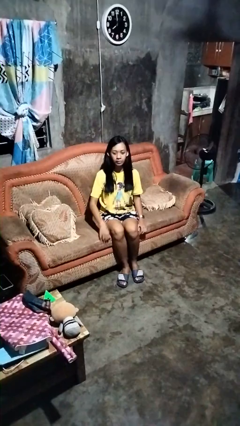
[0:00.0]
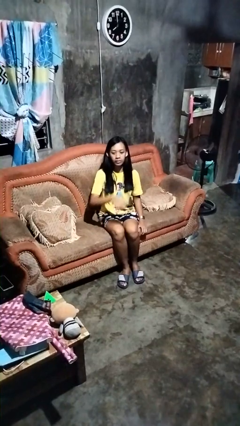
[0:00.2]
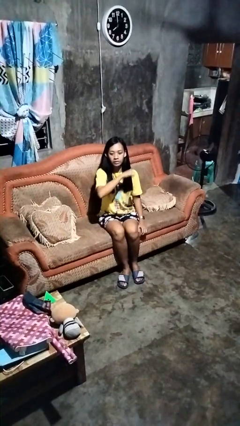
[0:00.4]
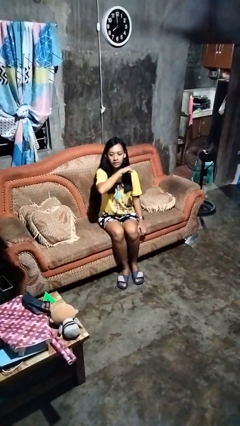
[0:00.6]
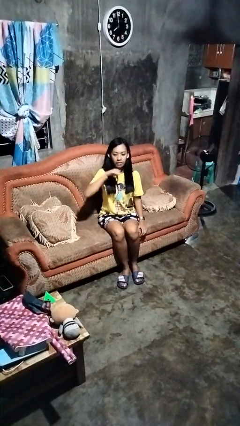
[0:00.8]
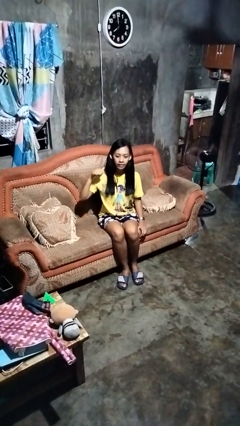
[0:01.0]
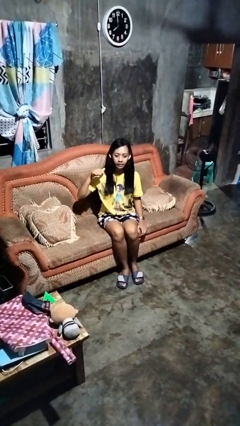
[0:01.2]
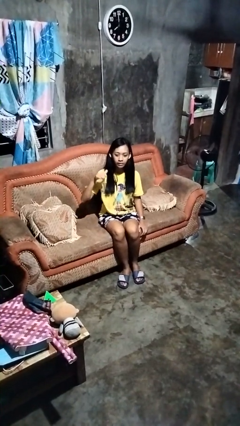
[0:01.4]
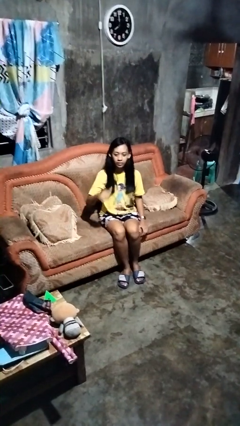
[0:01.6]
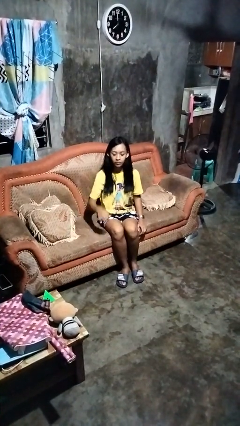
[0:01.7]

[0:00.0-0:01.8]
person gestures cut

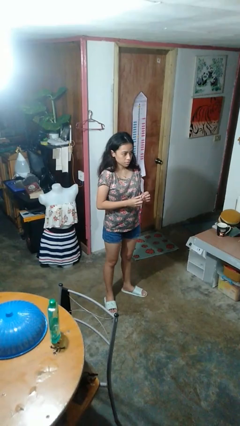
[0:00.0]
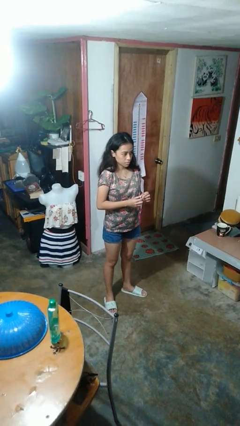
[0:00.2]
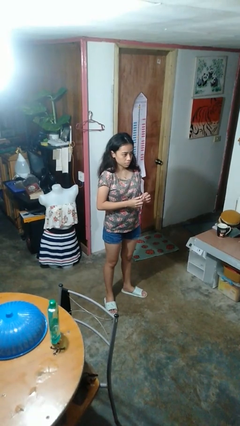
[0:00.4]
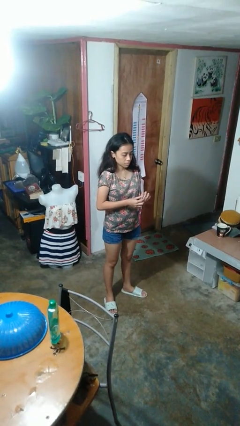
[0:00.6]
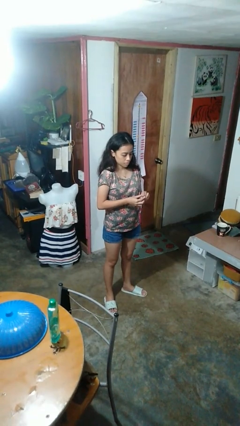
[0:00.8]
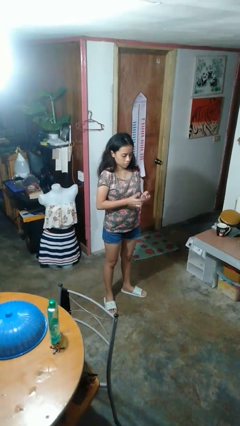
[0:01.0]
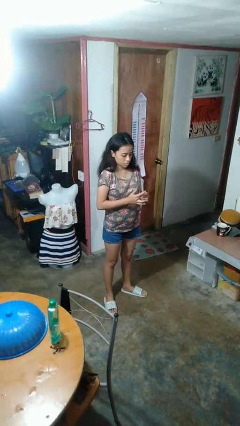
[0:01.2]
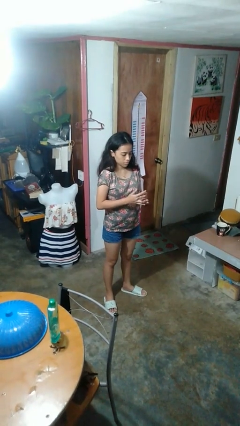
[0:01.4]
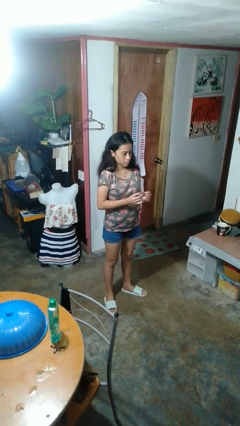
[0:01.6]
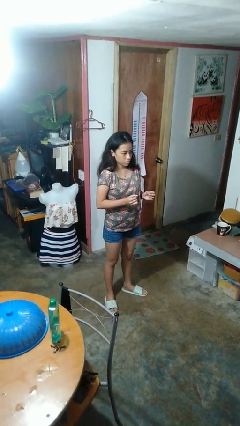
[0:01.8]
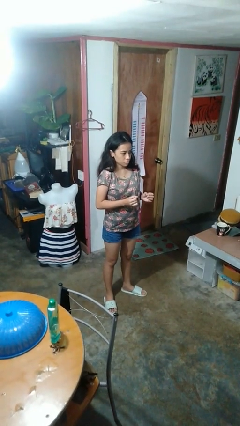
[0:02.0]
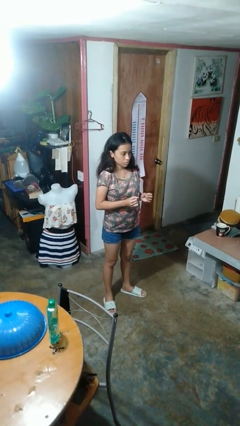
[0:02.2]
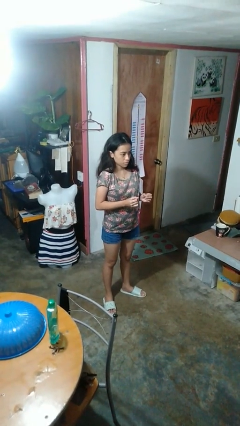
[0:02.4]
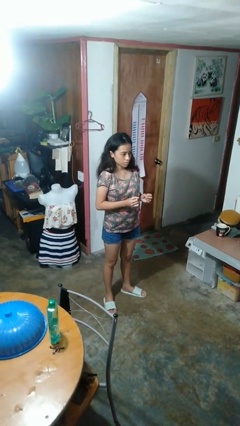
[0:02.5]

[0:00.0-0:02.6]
person puts on ring

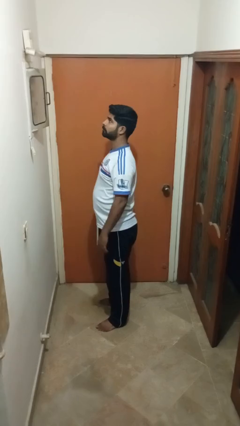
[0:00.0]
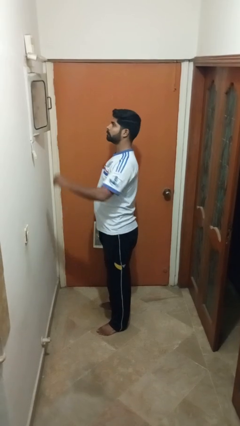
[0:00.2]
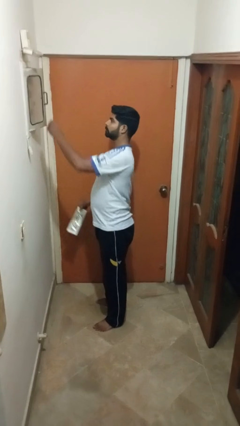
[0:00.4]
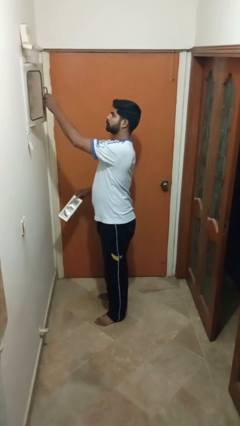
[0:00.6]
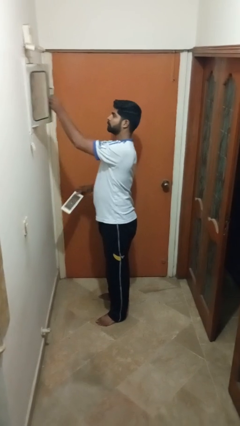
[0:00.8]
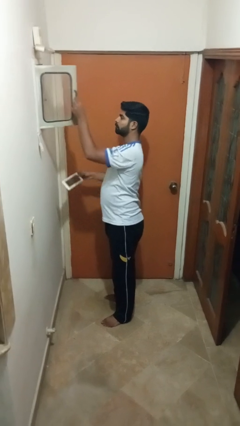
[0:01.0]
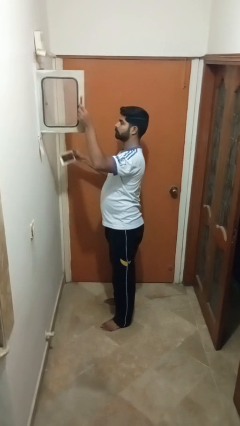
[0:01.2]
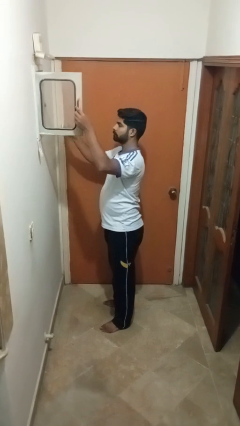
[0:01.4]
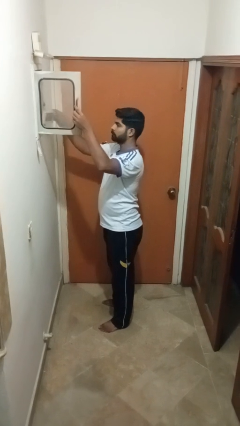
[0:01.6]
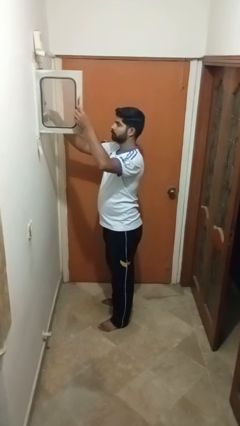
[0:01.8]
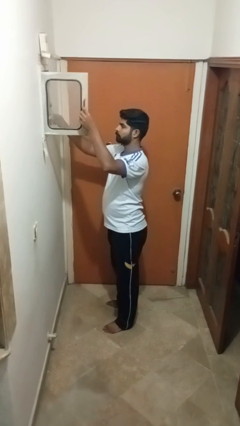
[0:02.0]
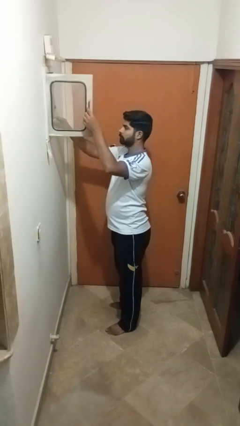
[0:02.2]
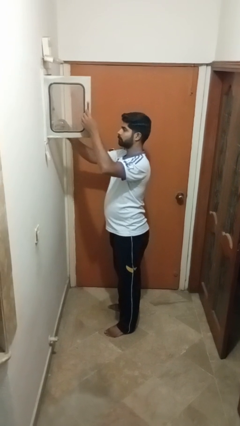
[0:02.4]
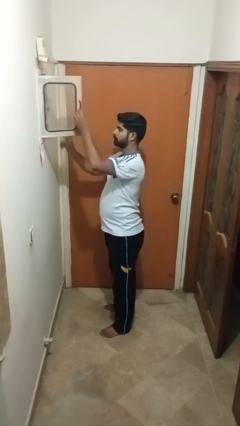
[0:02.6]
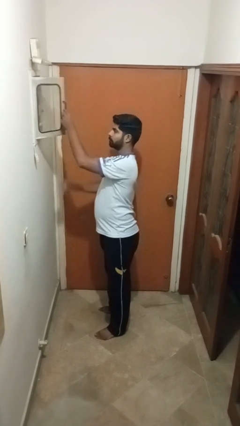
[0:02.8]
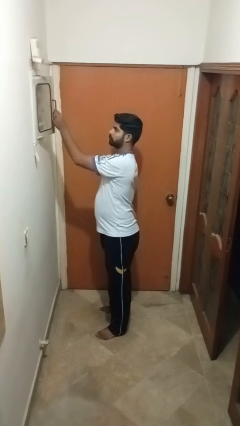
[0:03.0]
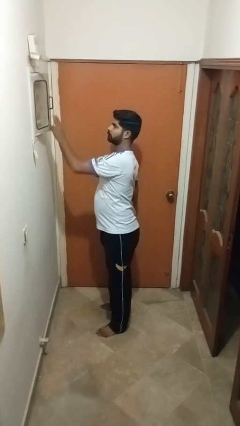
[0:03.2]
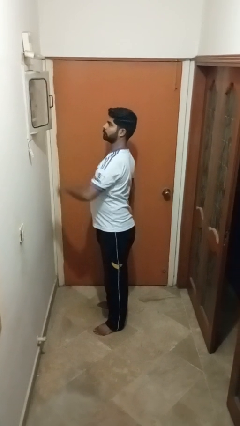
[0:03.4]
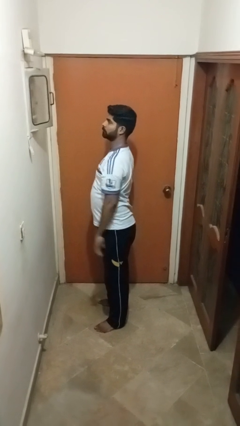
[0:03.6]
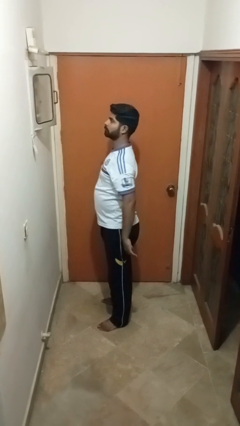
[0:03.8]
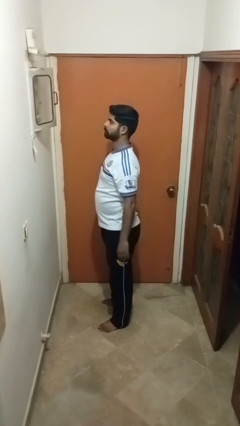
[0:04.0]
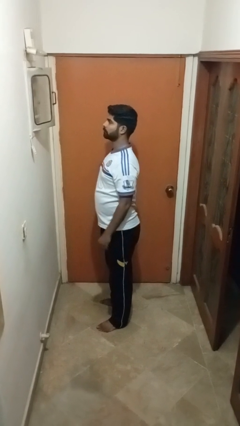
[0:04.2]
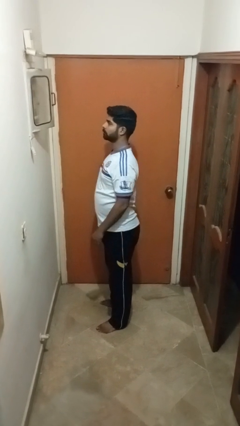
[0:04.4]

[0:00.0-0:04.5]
person puts letters in mailbox

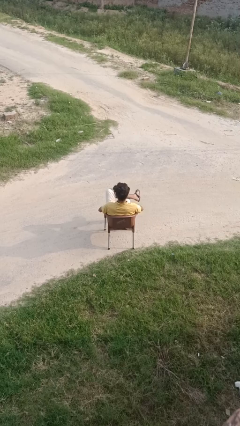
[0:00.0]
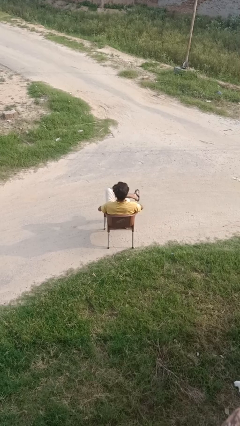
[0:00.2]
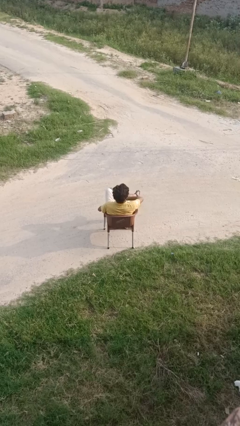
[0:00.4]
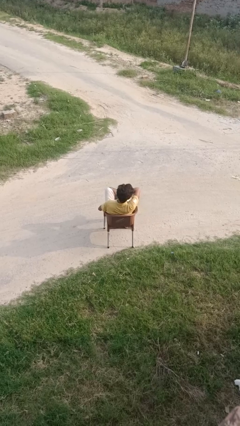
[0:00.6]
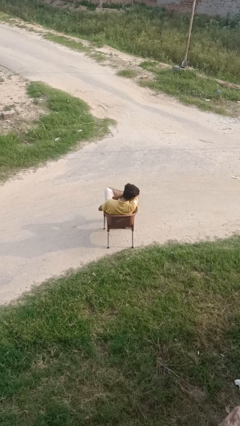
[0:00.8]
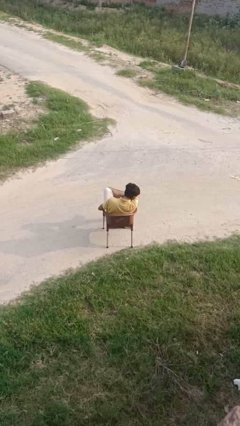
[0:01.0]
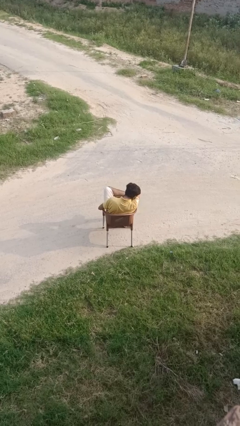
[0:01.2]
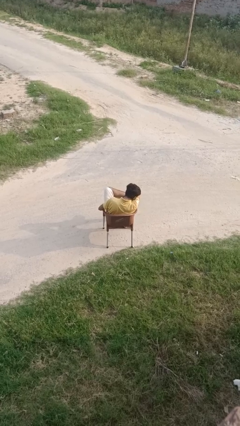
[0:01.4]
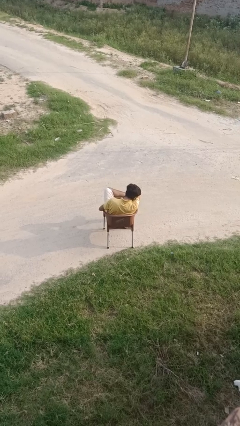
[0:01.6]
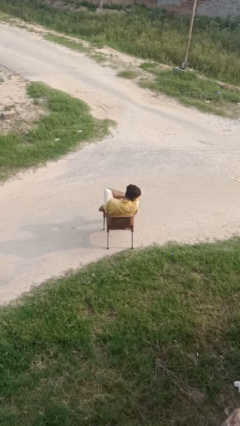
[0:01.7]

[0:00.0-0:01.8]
person sneezes into arm

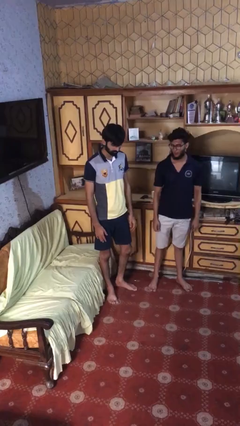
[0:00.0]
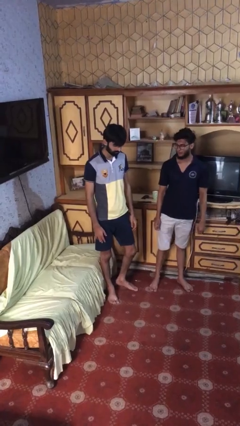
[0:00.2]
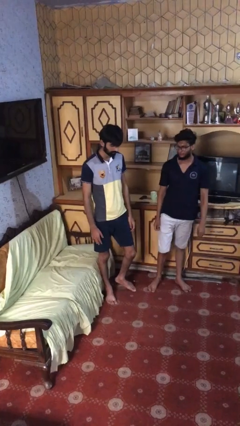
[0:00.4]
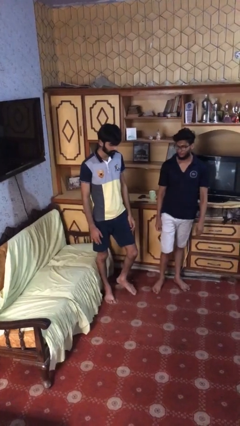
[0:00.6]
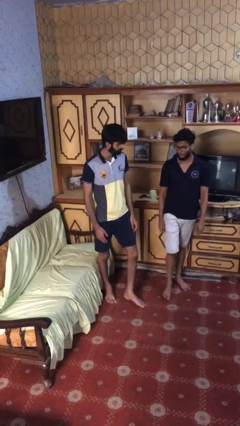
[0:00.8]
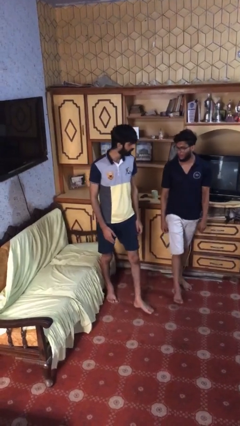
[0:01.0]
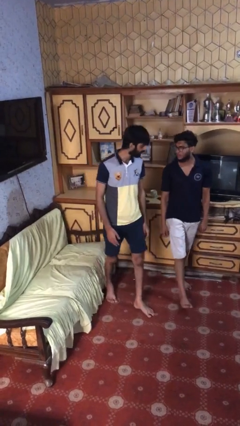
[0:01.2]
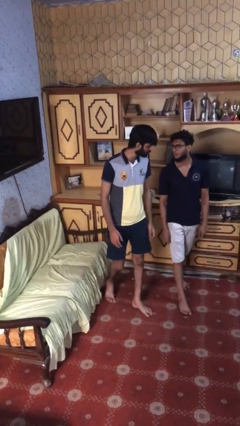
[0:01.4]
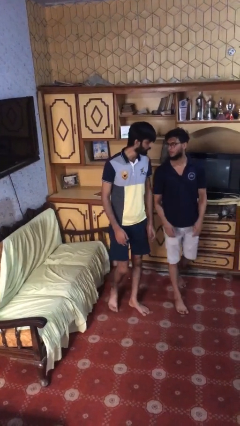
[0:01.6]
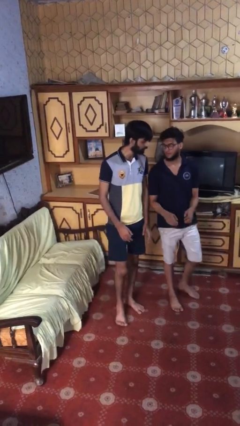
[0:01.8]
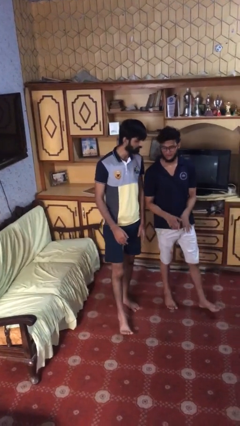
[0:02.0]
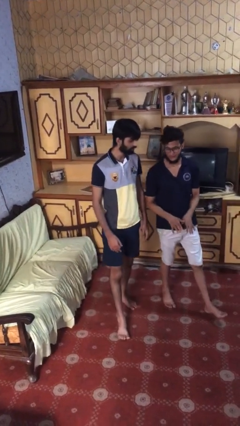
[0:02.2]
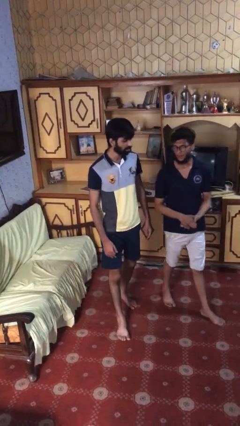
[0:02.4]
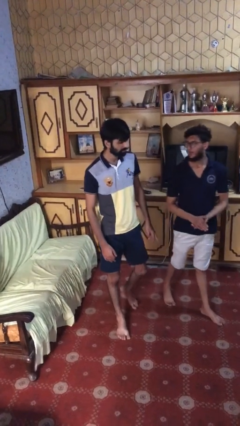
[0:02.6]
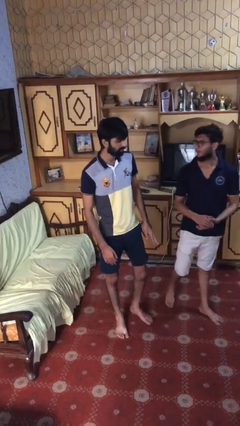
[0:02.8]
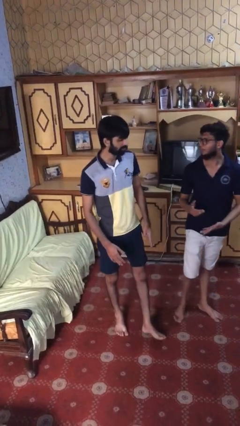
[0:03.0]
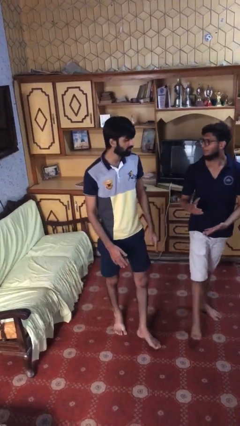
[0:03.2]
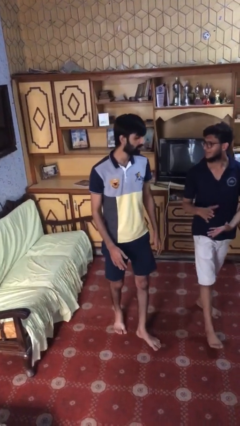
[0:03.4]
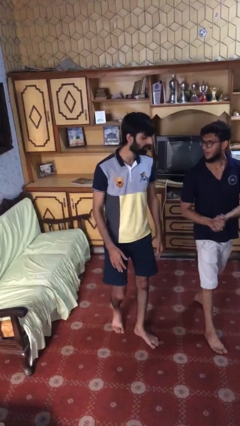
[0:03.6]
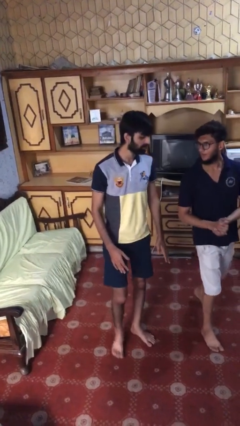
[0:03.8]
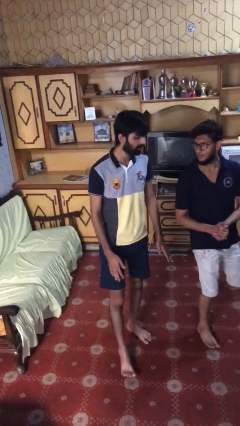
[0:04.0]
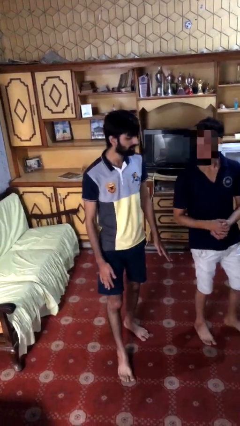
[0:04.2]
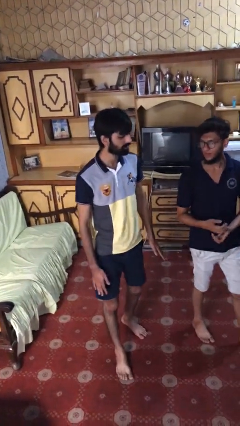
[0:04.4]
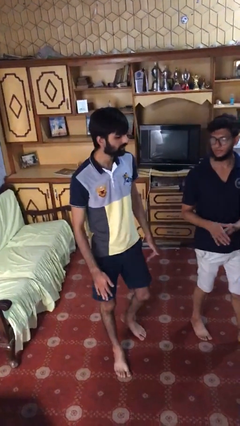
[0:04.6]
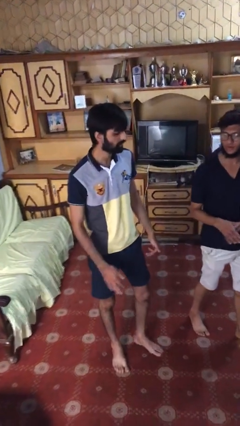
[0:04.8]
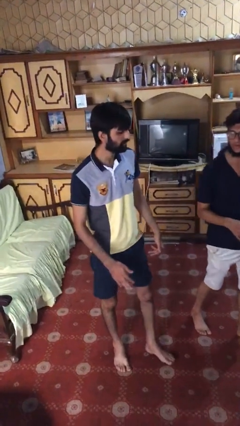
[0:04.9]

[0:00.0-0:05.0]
person talks to person

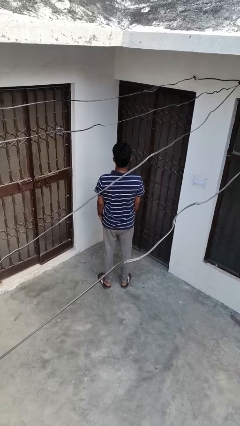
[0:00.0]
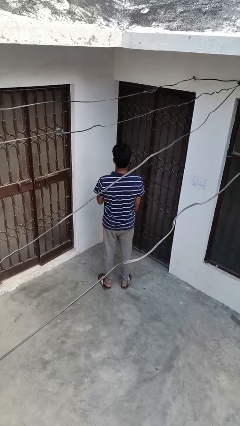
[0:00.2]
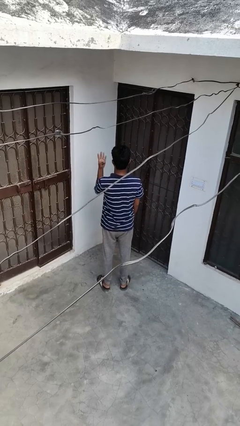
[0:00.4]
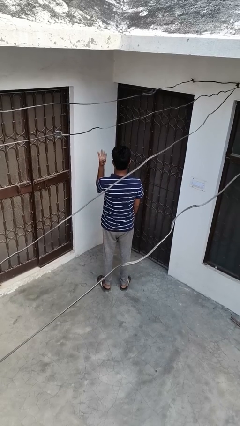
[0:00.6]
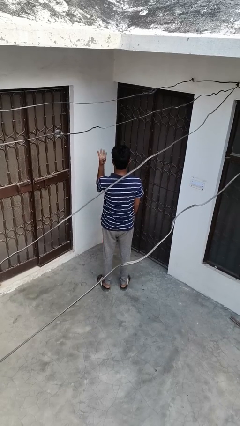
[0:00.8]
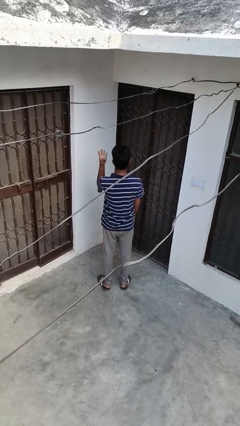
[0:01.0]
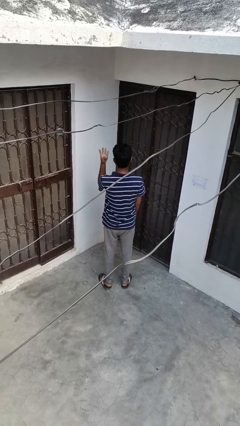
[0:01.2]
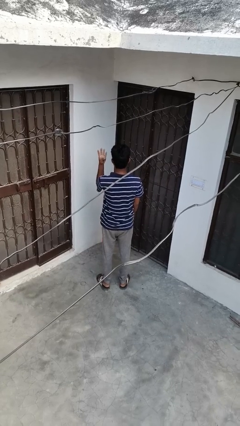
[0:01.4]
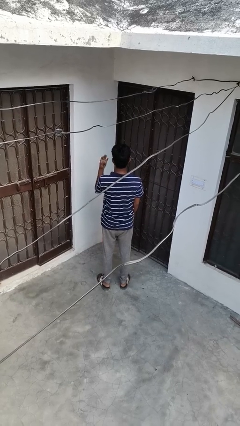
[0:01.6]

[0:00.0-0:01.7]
person gestures number four

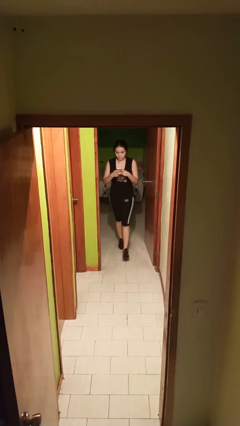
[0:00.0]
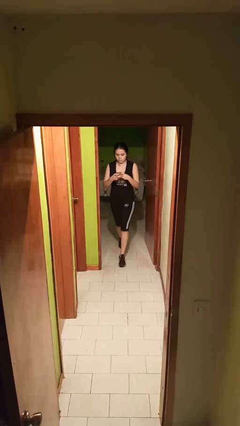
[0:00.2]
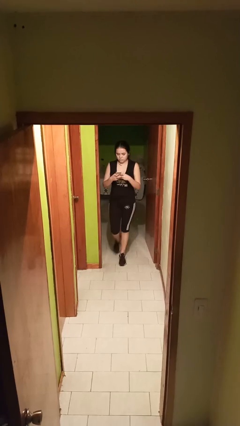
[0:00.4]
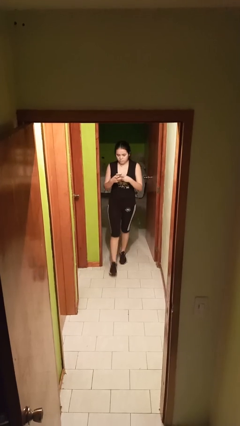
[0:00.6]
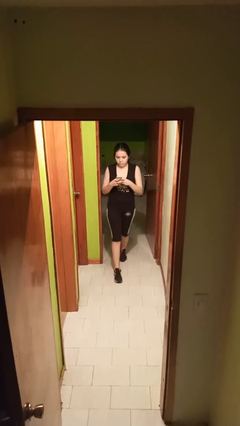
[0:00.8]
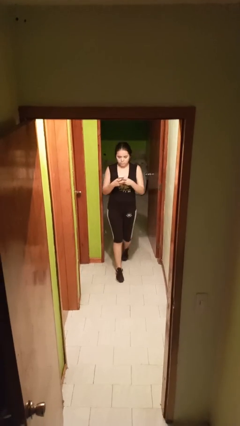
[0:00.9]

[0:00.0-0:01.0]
person enters scene through structure
